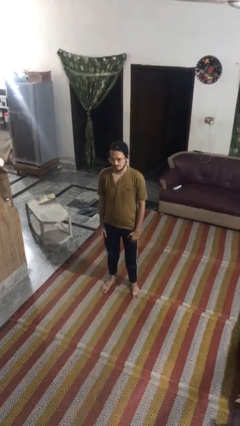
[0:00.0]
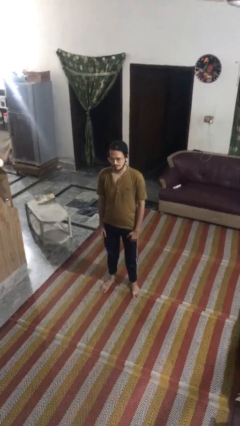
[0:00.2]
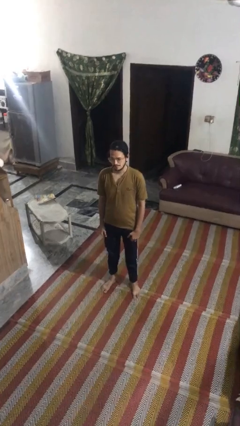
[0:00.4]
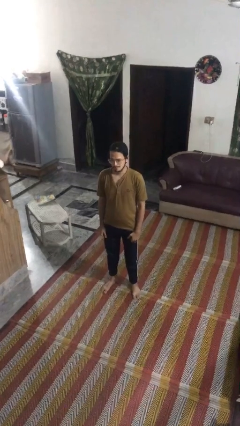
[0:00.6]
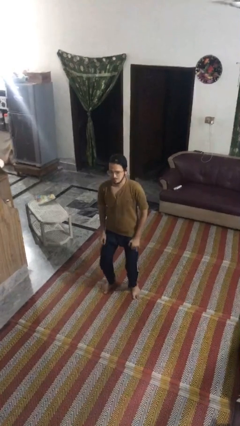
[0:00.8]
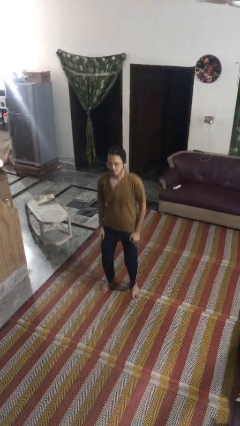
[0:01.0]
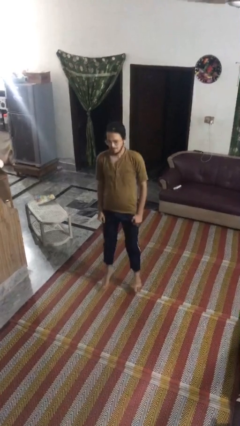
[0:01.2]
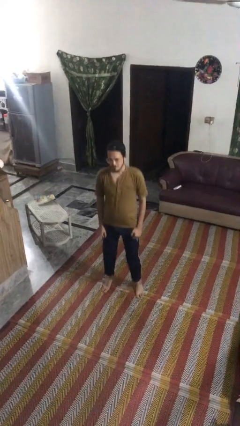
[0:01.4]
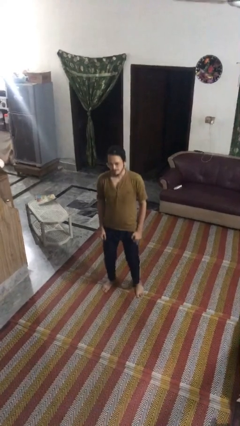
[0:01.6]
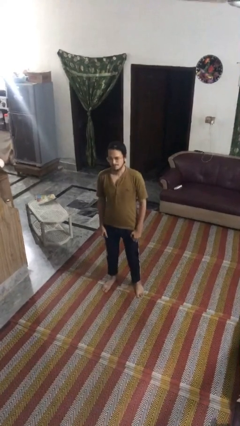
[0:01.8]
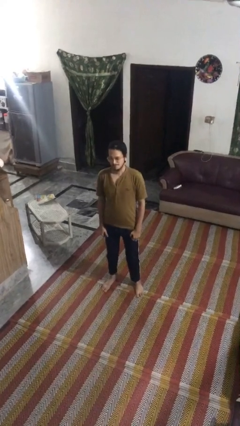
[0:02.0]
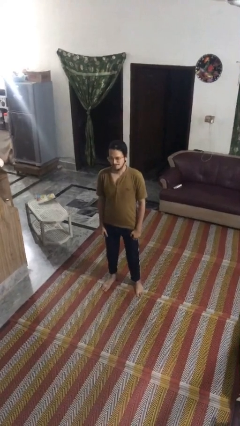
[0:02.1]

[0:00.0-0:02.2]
person jumps

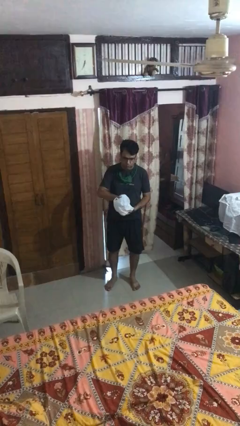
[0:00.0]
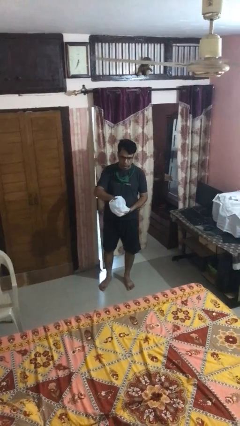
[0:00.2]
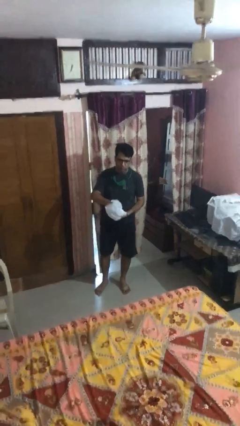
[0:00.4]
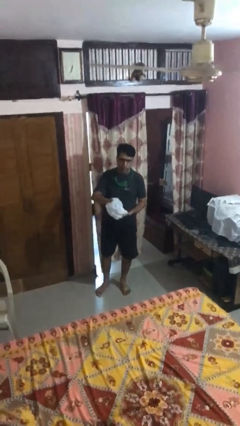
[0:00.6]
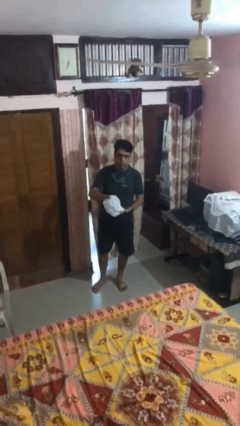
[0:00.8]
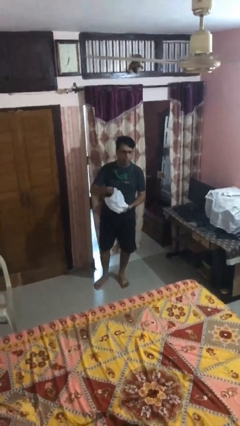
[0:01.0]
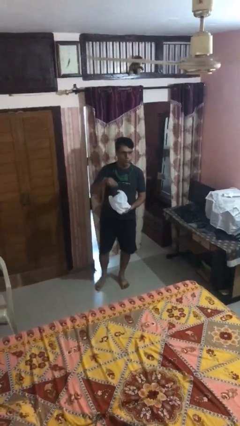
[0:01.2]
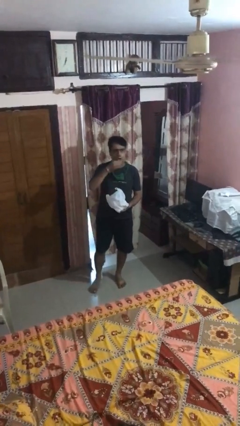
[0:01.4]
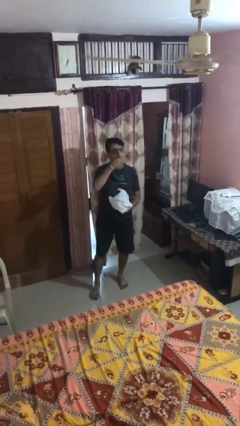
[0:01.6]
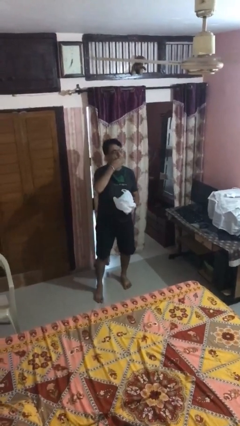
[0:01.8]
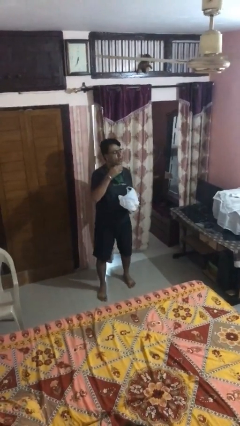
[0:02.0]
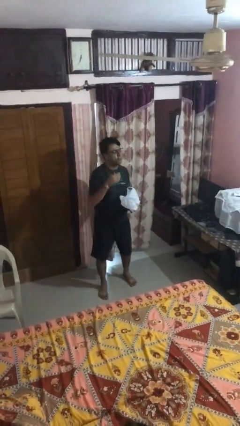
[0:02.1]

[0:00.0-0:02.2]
person eats snack from bag

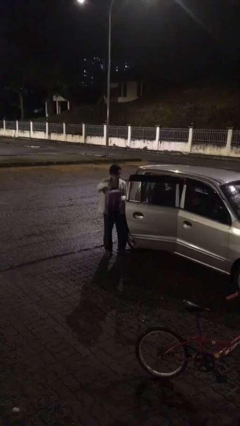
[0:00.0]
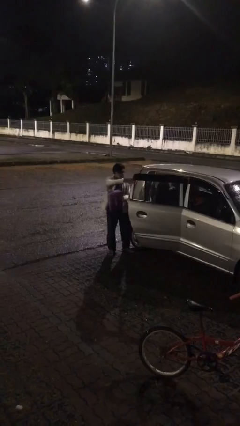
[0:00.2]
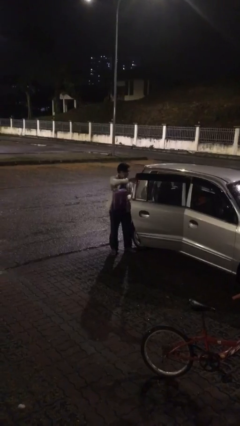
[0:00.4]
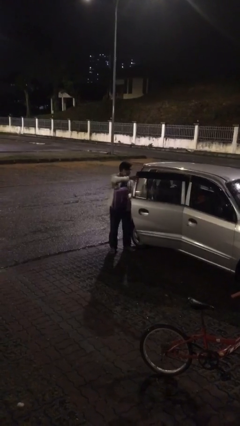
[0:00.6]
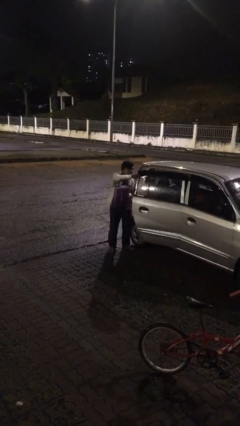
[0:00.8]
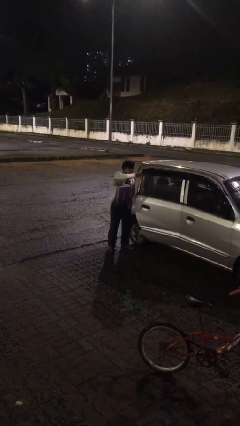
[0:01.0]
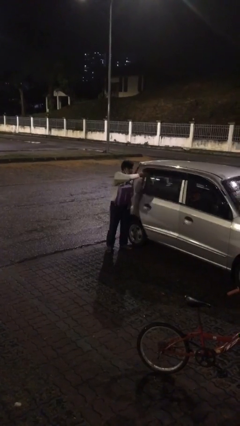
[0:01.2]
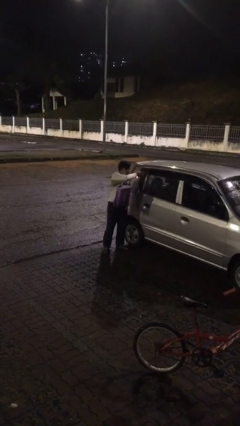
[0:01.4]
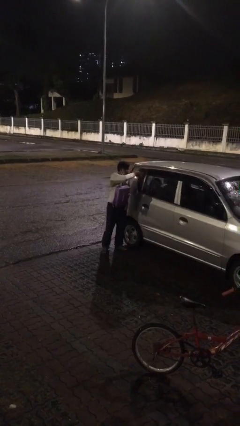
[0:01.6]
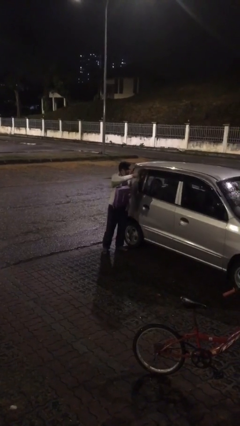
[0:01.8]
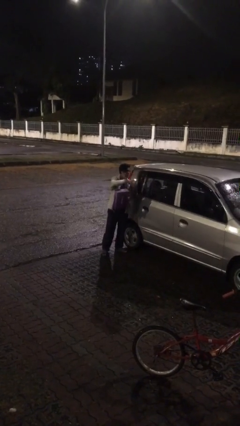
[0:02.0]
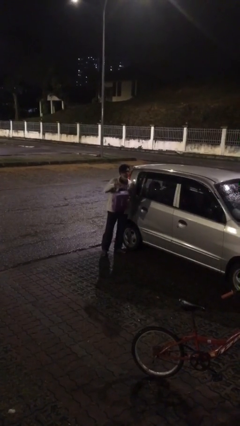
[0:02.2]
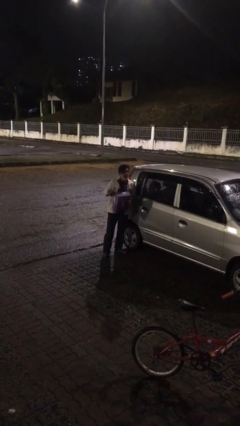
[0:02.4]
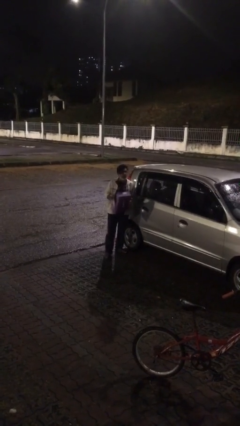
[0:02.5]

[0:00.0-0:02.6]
person closes car door

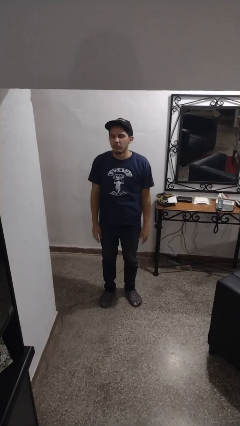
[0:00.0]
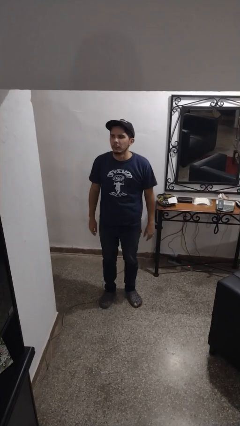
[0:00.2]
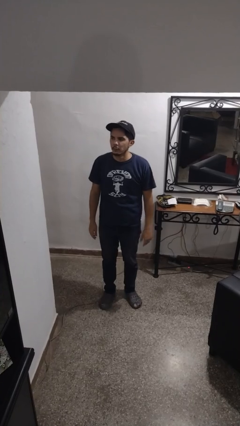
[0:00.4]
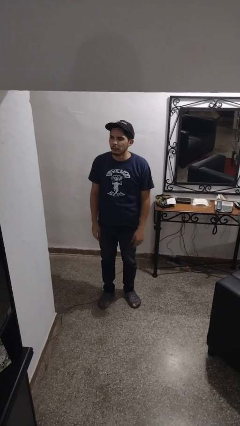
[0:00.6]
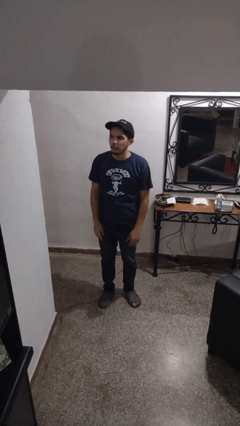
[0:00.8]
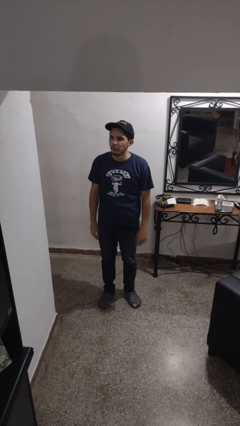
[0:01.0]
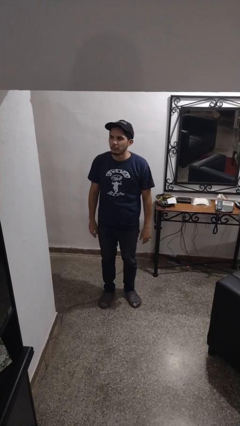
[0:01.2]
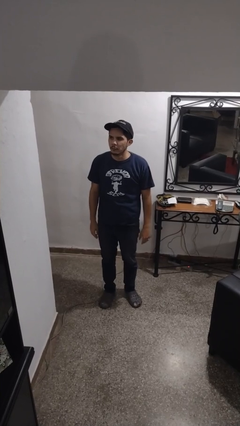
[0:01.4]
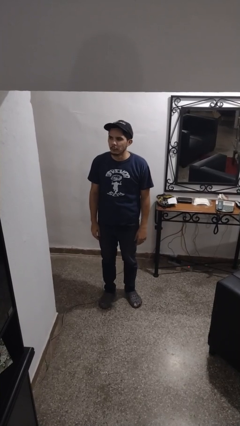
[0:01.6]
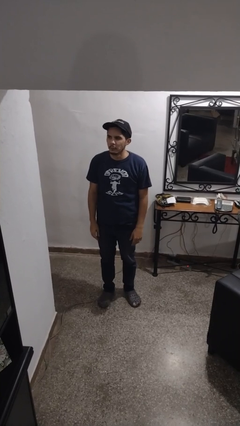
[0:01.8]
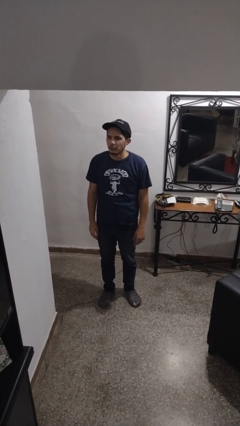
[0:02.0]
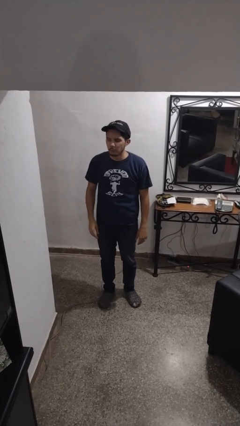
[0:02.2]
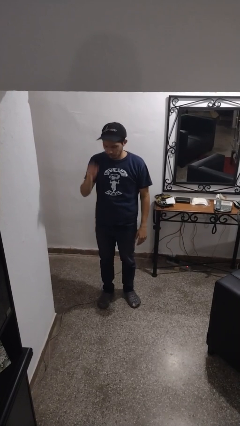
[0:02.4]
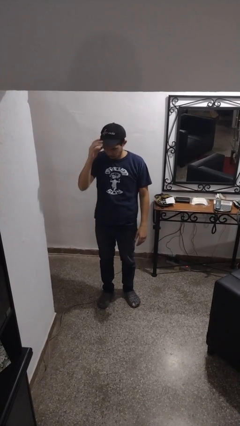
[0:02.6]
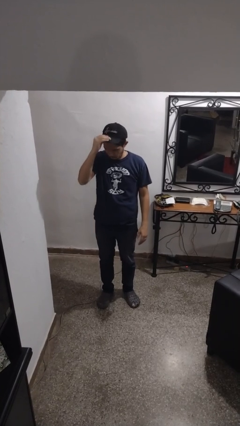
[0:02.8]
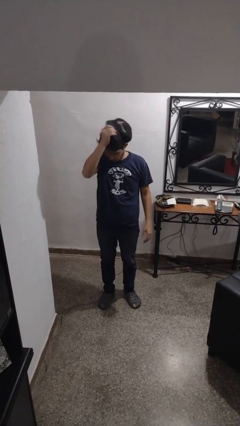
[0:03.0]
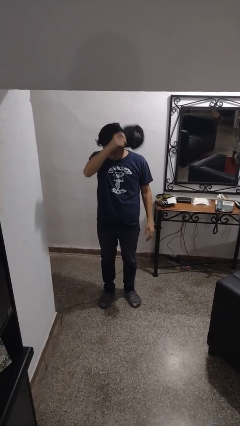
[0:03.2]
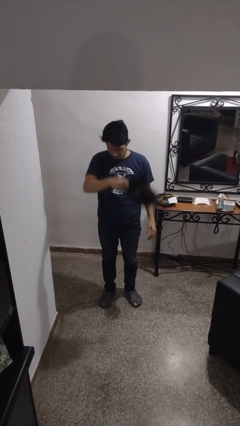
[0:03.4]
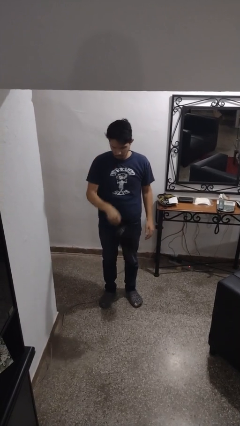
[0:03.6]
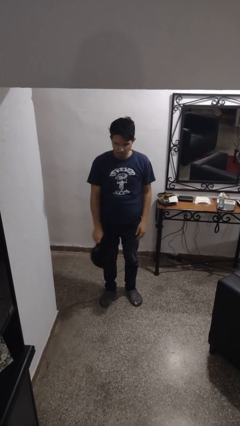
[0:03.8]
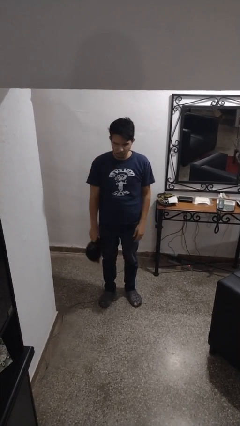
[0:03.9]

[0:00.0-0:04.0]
person takes off hat

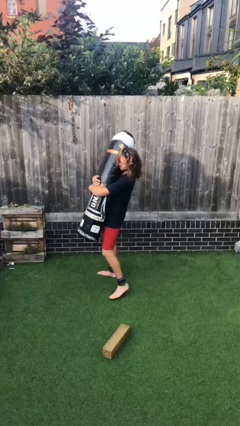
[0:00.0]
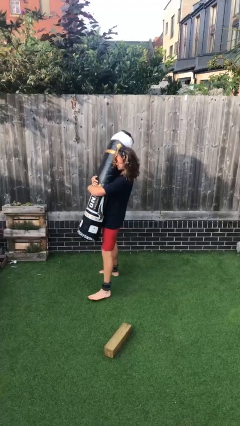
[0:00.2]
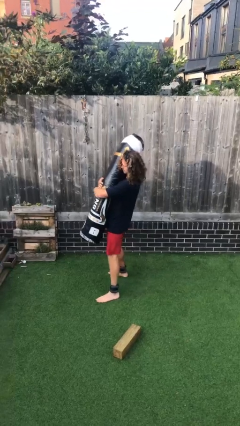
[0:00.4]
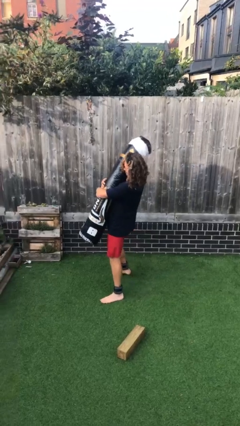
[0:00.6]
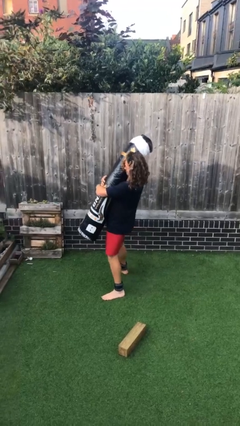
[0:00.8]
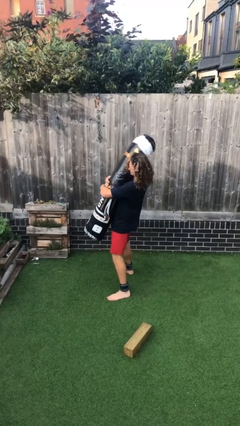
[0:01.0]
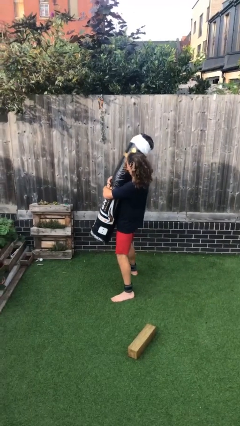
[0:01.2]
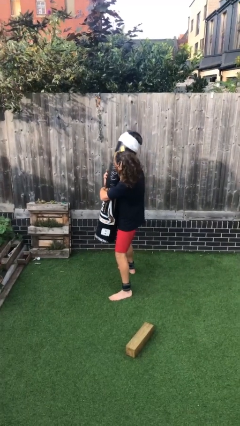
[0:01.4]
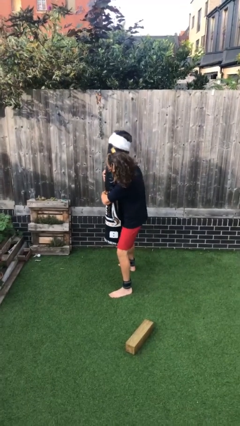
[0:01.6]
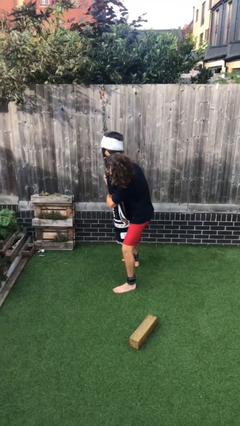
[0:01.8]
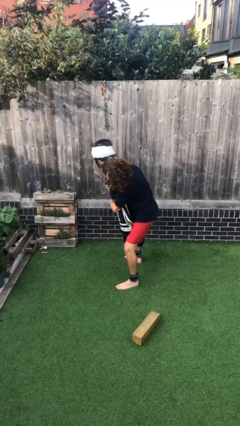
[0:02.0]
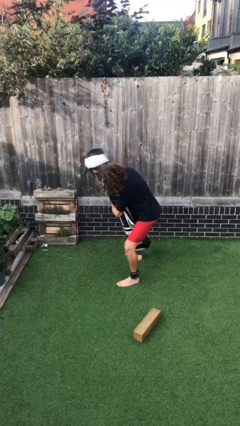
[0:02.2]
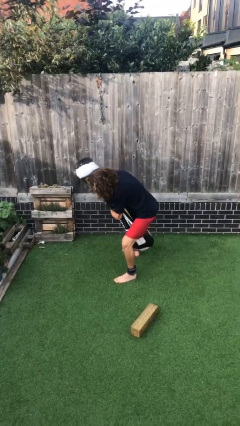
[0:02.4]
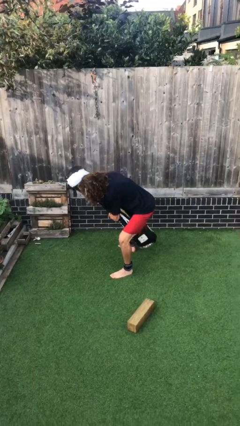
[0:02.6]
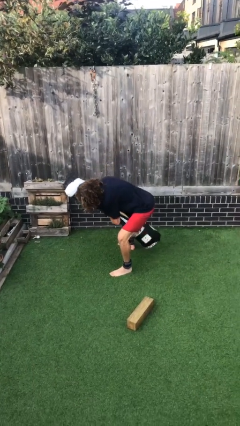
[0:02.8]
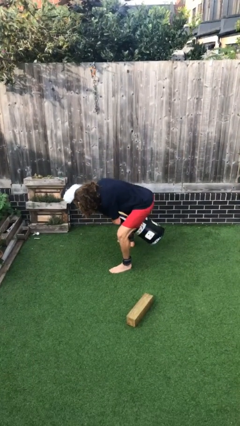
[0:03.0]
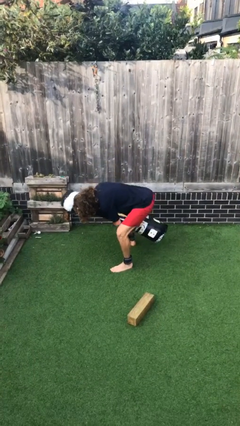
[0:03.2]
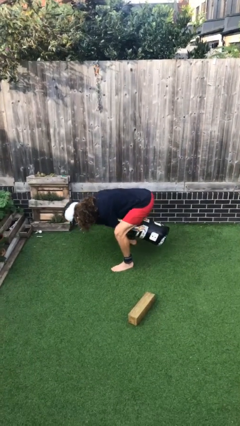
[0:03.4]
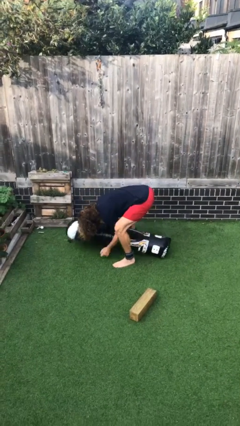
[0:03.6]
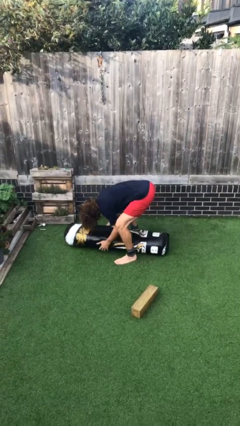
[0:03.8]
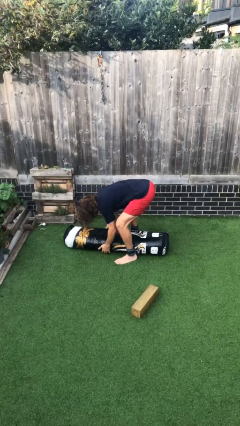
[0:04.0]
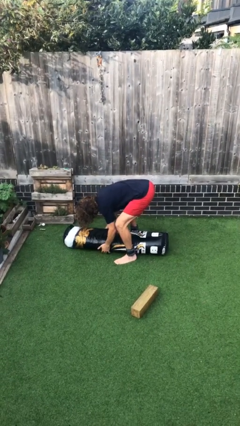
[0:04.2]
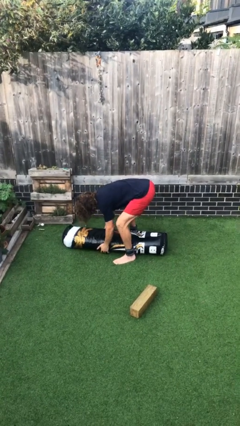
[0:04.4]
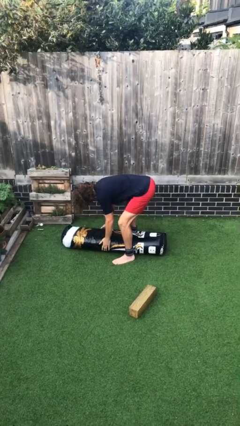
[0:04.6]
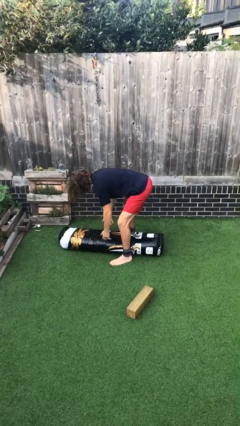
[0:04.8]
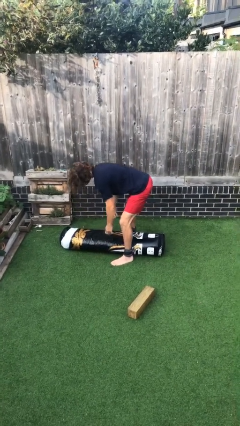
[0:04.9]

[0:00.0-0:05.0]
person puts down object on floor

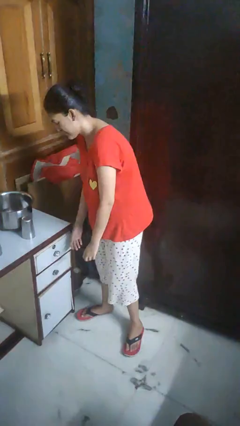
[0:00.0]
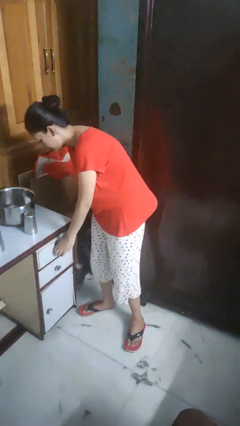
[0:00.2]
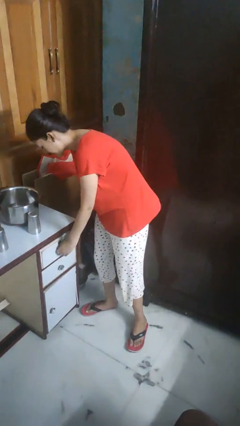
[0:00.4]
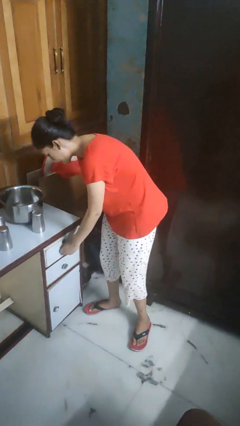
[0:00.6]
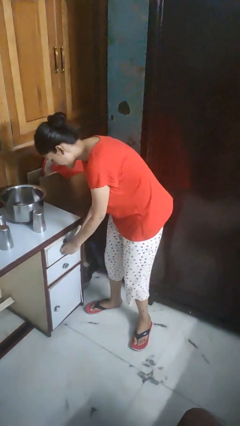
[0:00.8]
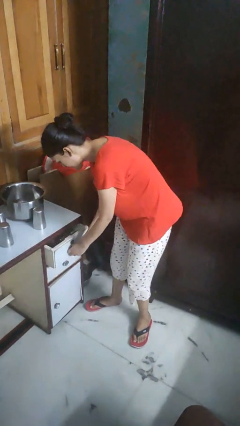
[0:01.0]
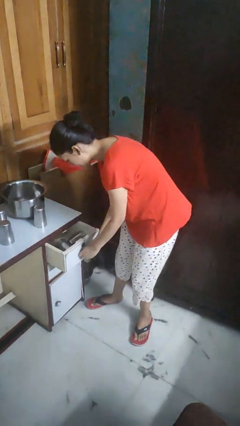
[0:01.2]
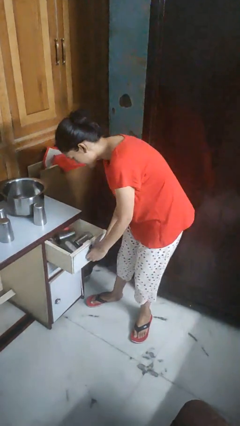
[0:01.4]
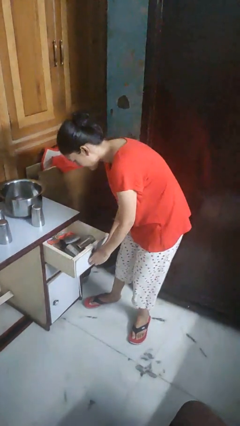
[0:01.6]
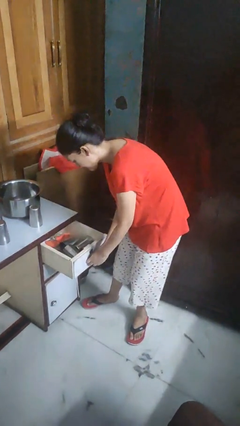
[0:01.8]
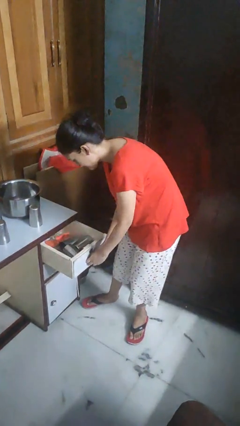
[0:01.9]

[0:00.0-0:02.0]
person opens kitchen drawer
